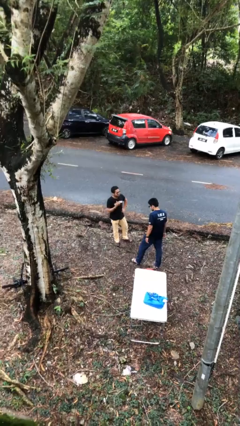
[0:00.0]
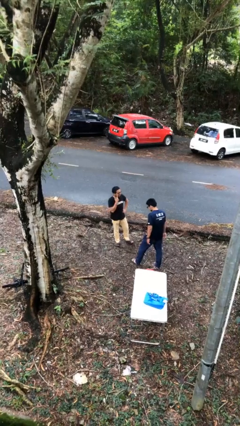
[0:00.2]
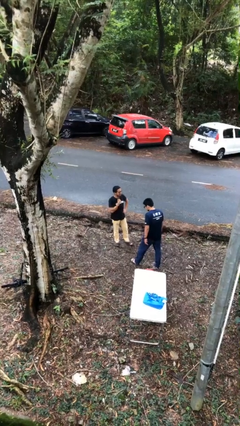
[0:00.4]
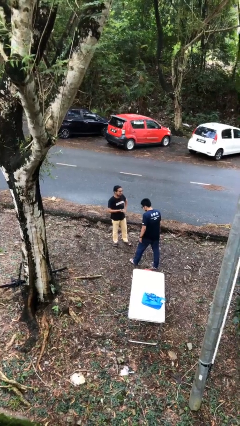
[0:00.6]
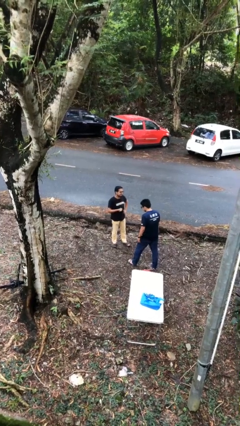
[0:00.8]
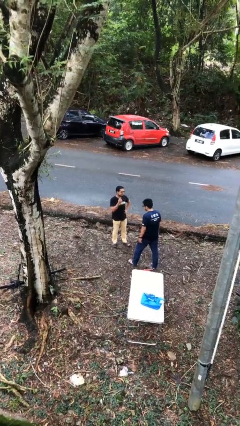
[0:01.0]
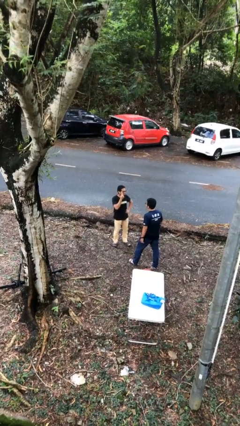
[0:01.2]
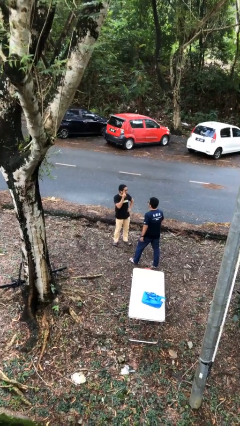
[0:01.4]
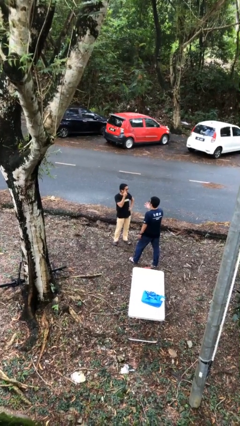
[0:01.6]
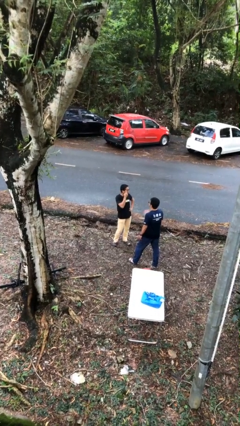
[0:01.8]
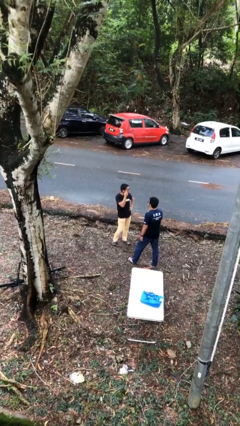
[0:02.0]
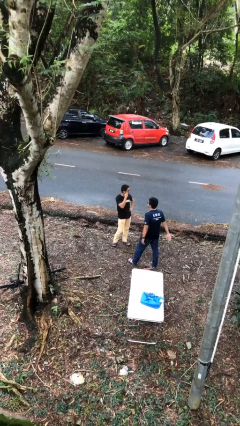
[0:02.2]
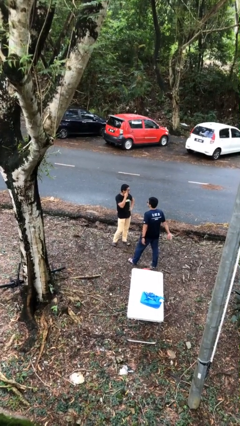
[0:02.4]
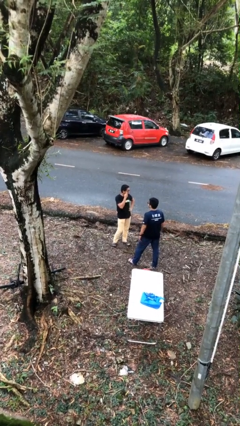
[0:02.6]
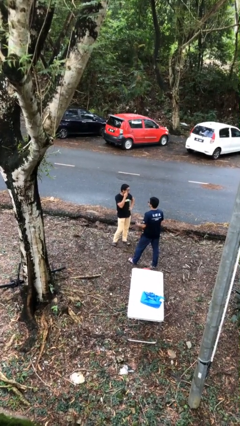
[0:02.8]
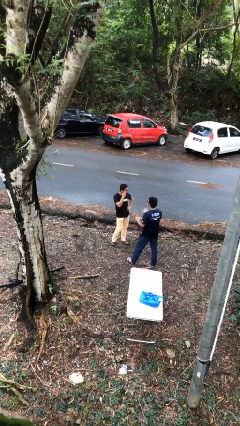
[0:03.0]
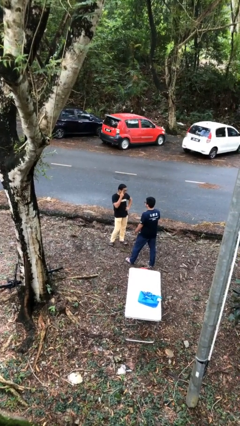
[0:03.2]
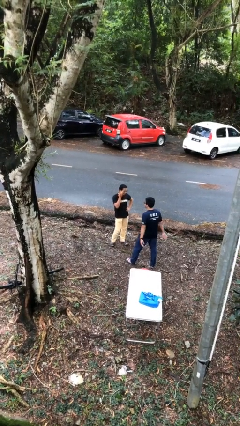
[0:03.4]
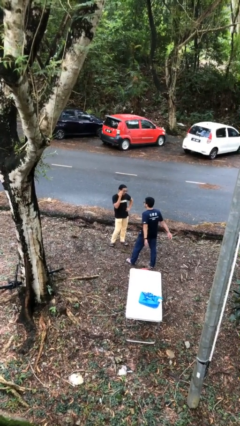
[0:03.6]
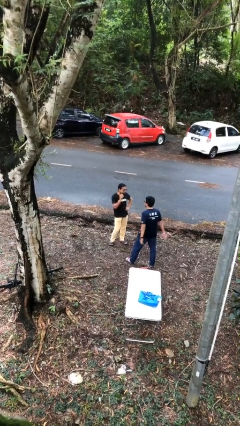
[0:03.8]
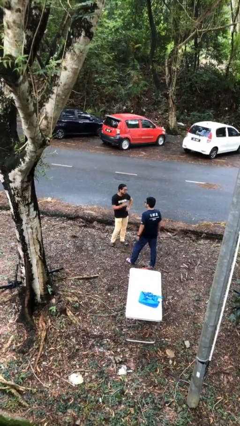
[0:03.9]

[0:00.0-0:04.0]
person talks to person

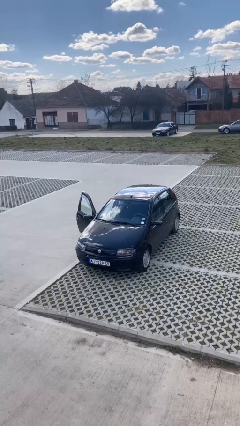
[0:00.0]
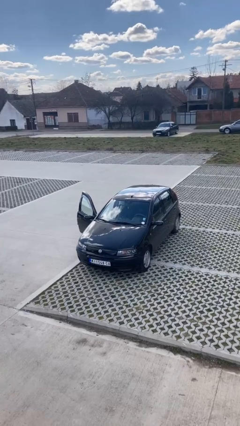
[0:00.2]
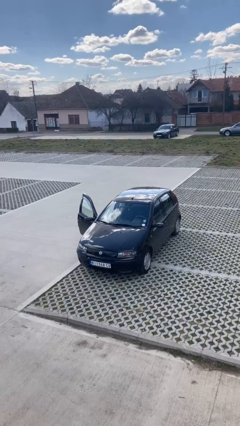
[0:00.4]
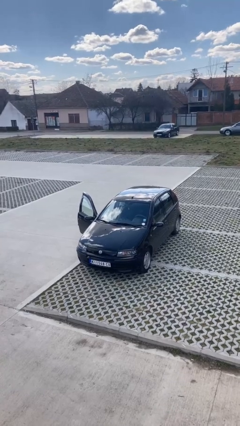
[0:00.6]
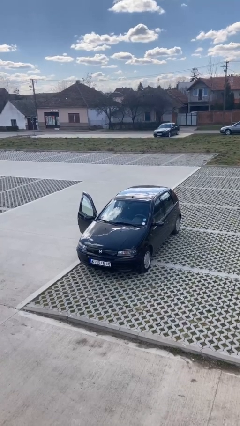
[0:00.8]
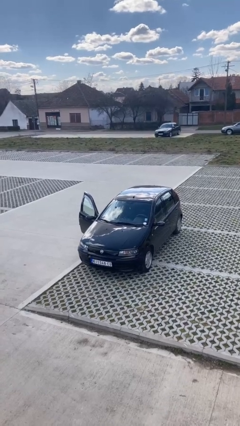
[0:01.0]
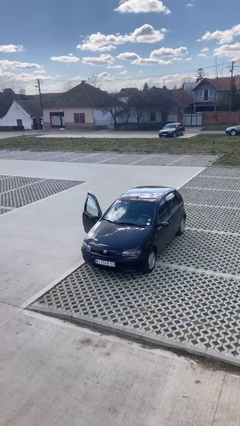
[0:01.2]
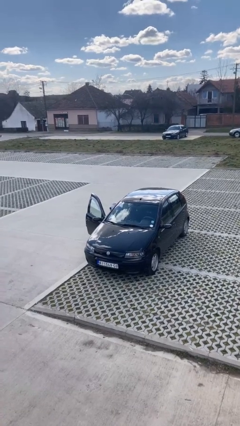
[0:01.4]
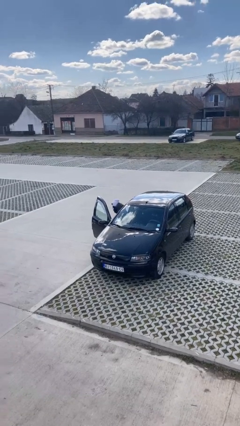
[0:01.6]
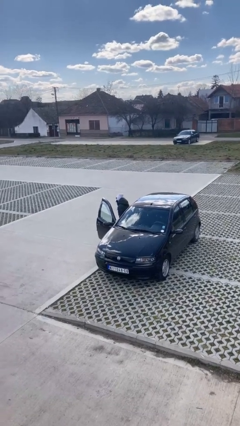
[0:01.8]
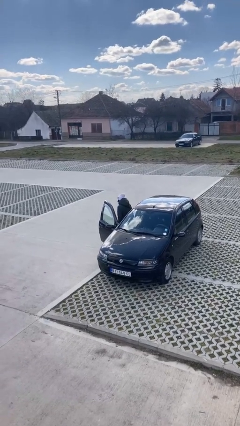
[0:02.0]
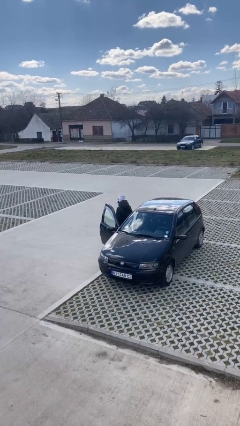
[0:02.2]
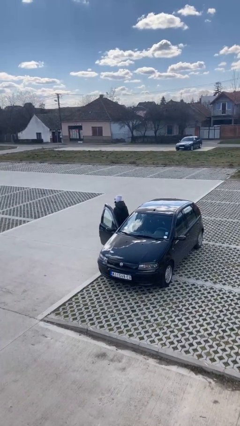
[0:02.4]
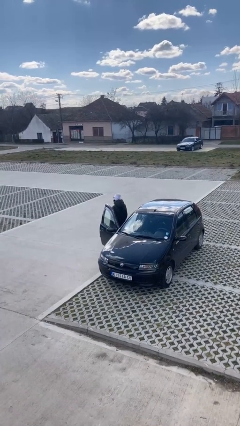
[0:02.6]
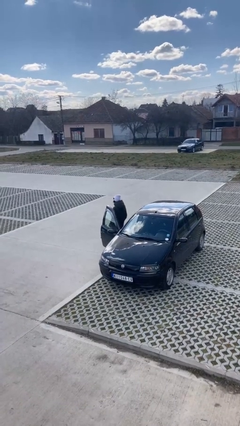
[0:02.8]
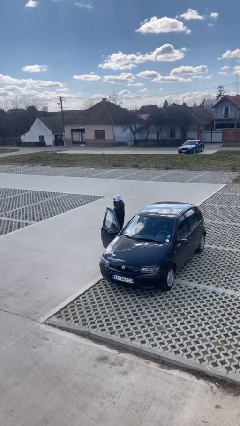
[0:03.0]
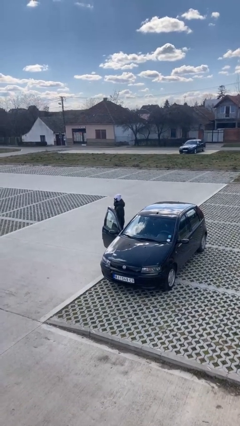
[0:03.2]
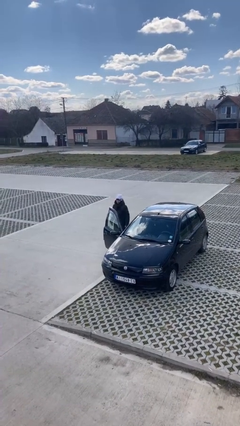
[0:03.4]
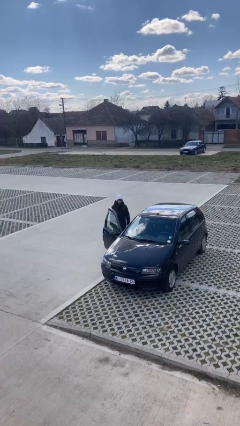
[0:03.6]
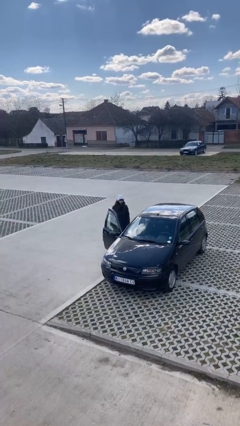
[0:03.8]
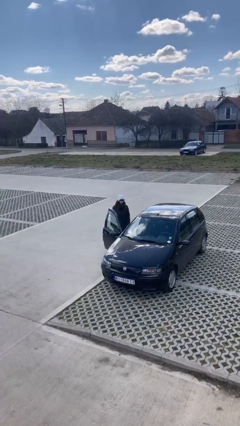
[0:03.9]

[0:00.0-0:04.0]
person exits car

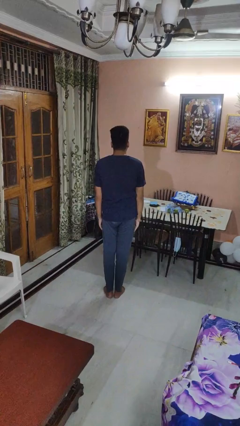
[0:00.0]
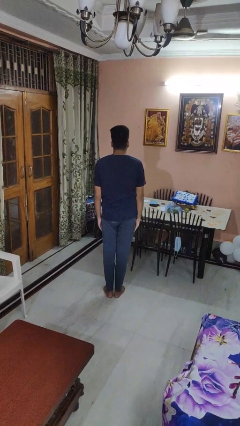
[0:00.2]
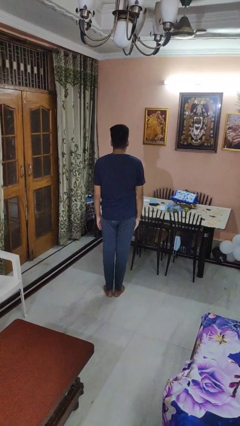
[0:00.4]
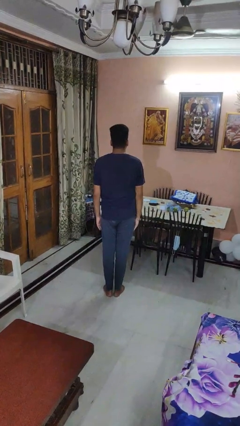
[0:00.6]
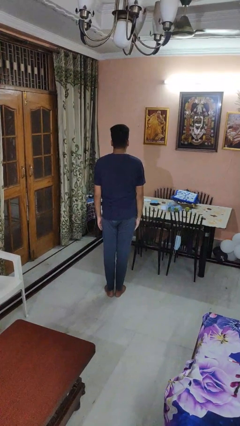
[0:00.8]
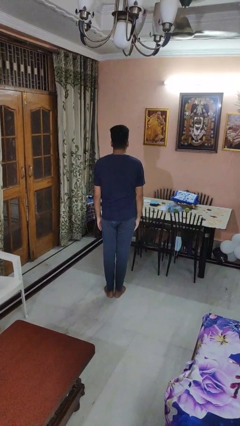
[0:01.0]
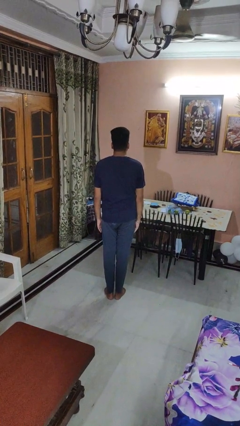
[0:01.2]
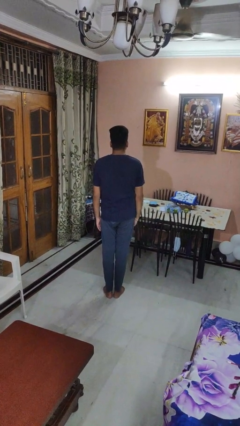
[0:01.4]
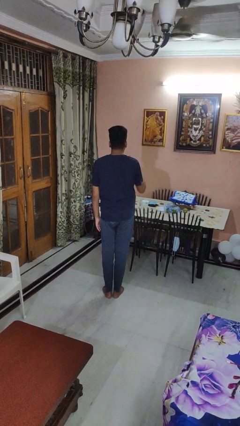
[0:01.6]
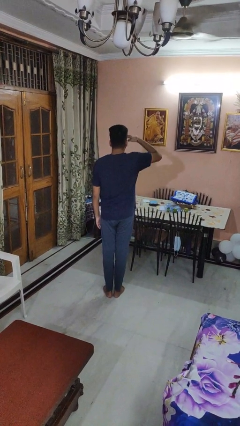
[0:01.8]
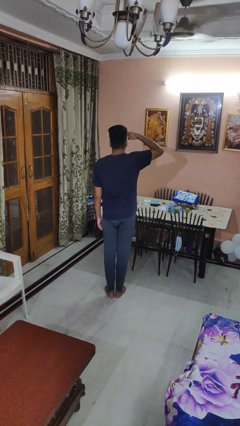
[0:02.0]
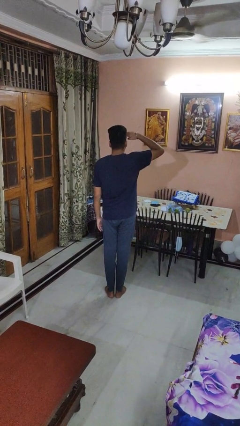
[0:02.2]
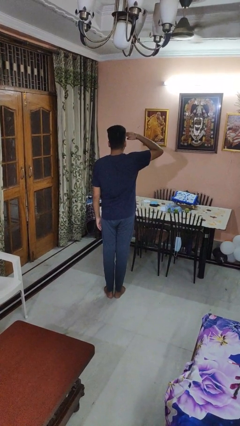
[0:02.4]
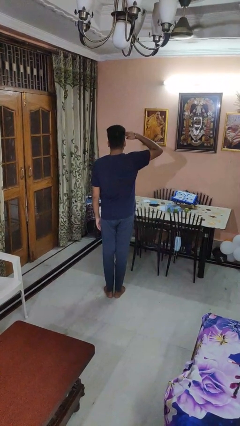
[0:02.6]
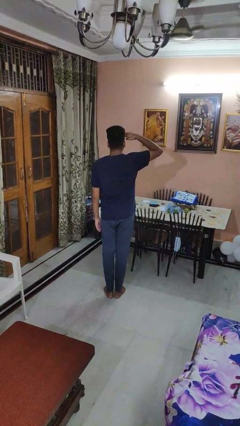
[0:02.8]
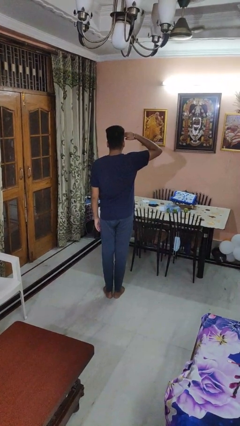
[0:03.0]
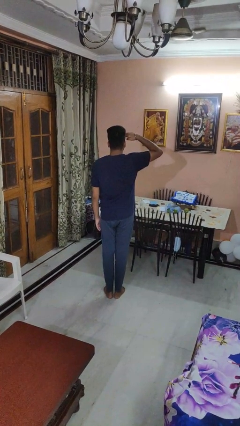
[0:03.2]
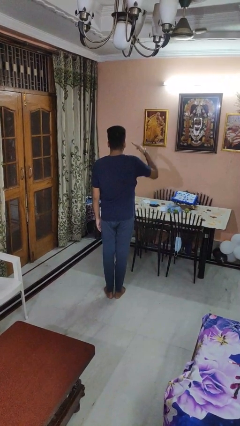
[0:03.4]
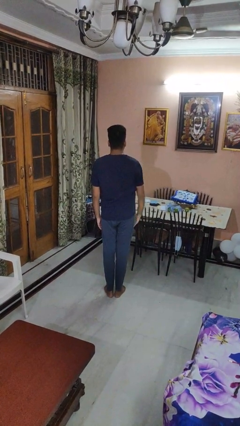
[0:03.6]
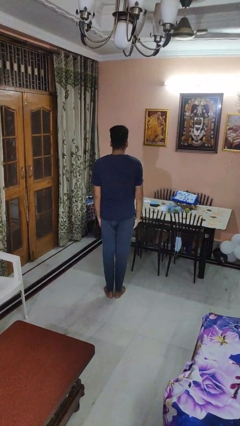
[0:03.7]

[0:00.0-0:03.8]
person salutes

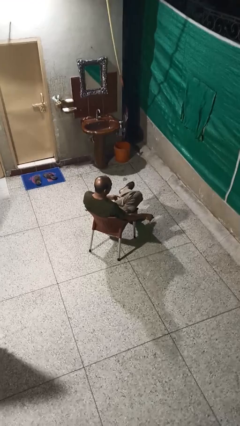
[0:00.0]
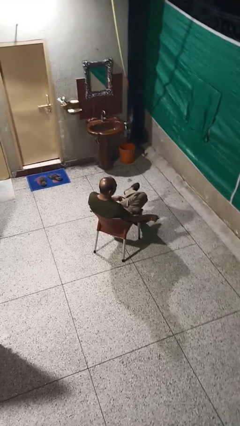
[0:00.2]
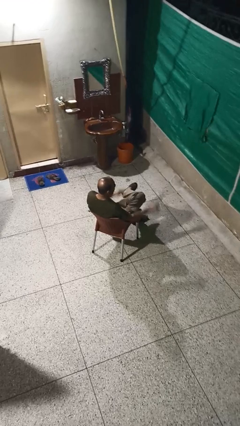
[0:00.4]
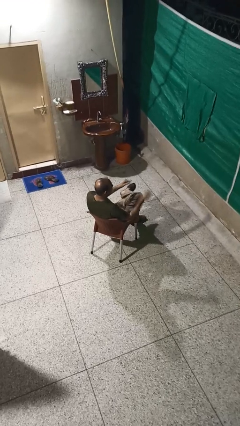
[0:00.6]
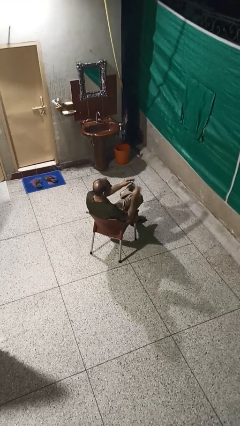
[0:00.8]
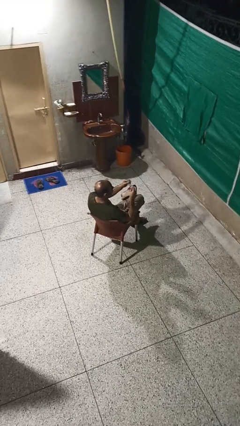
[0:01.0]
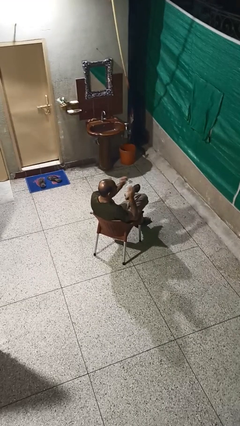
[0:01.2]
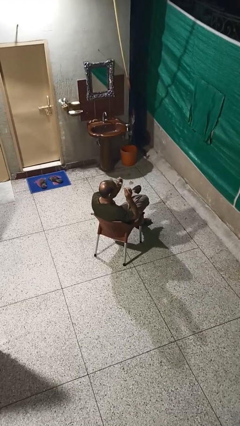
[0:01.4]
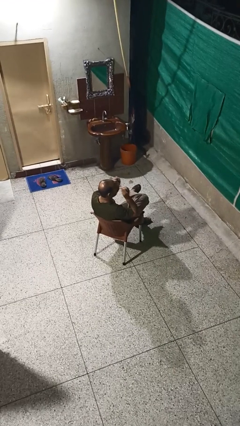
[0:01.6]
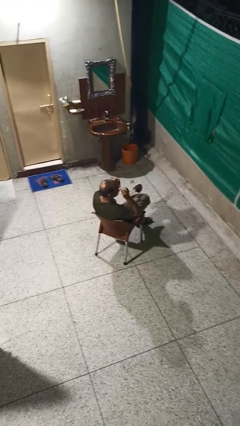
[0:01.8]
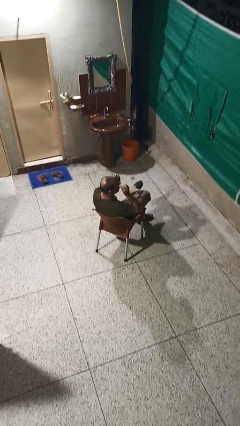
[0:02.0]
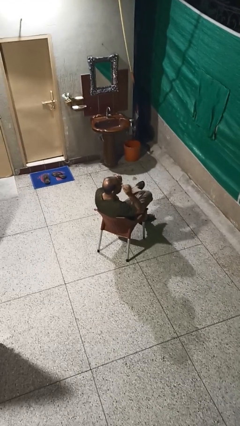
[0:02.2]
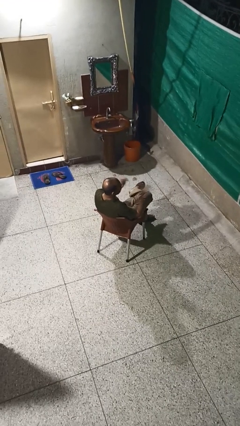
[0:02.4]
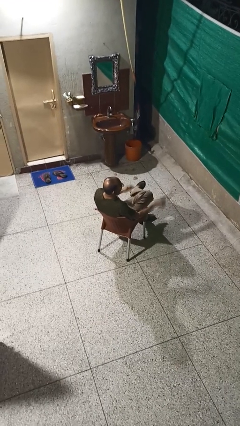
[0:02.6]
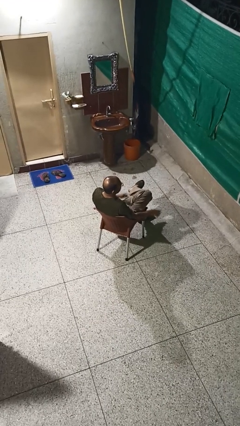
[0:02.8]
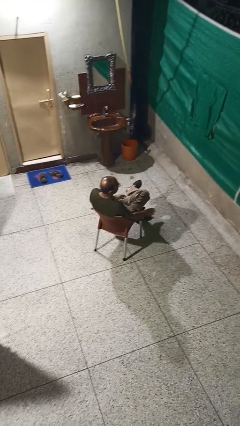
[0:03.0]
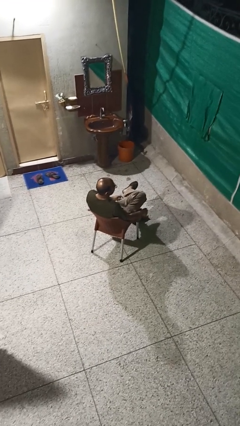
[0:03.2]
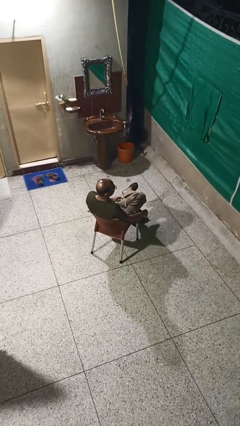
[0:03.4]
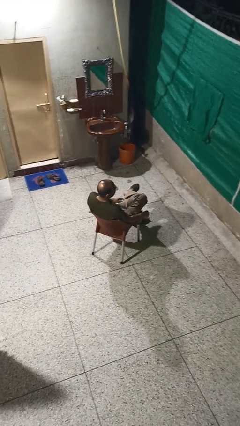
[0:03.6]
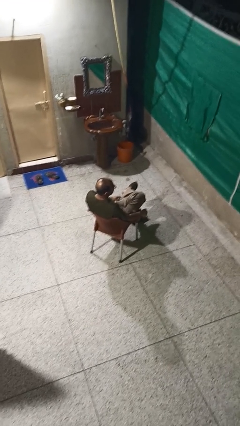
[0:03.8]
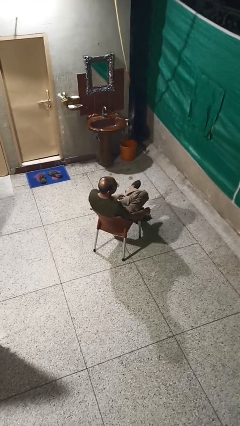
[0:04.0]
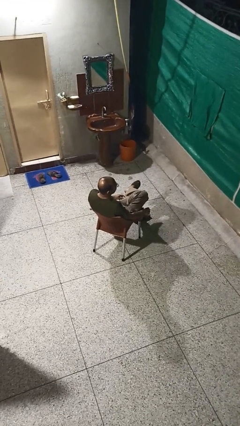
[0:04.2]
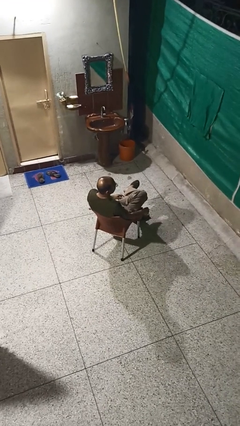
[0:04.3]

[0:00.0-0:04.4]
person puts on glasses

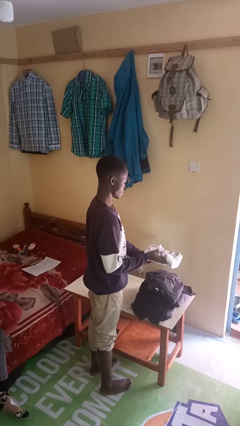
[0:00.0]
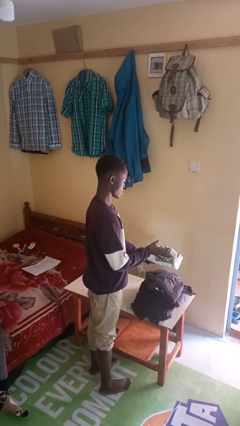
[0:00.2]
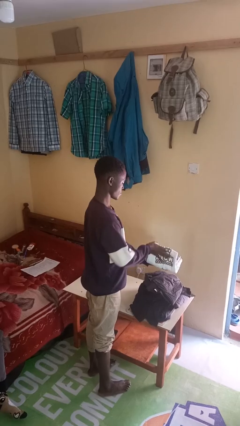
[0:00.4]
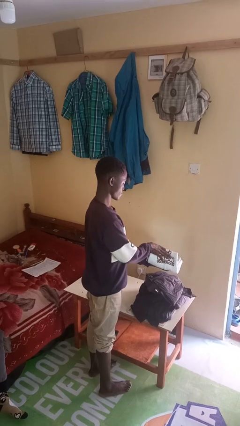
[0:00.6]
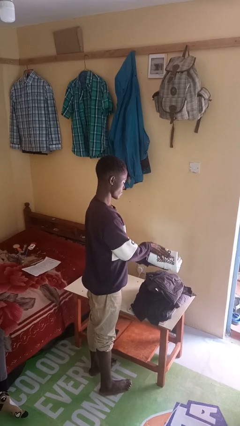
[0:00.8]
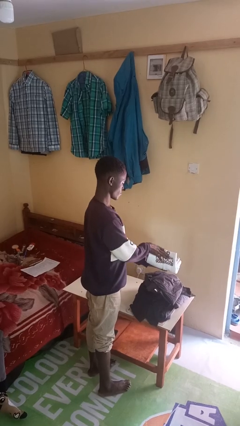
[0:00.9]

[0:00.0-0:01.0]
person folds shirt

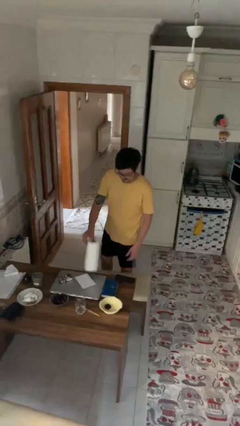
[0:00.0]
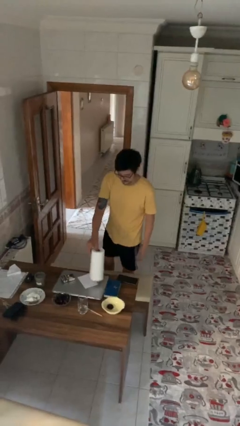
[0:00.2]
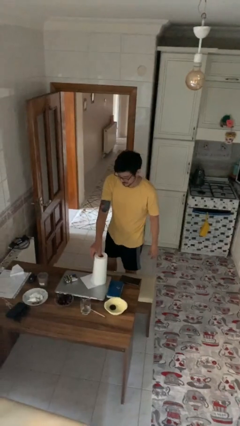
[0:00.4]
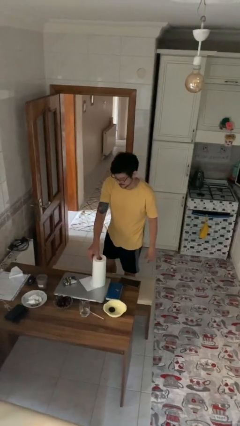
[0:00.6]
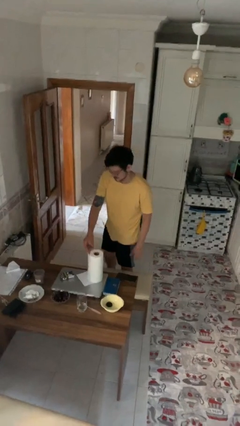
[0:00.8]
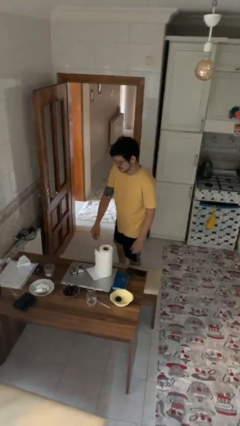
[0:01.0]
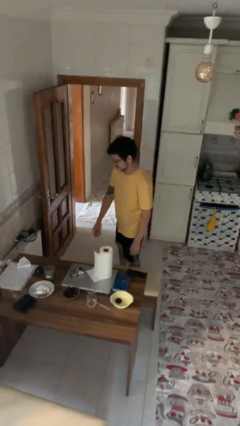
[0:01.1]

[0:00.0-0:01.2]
person puts down object on table
